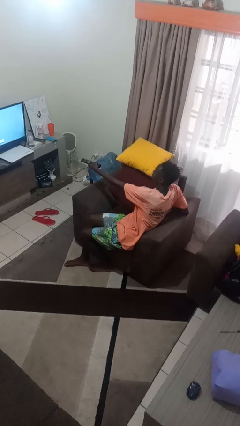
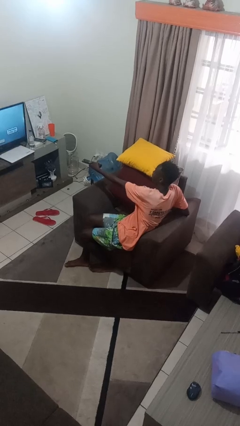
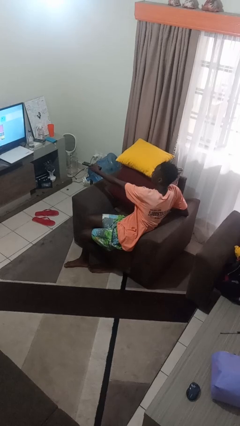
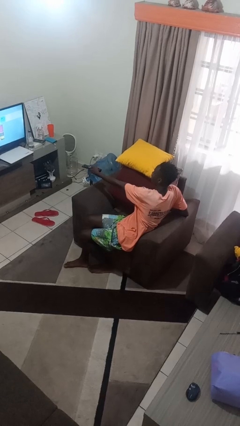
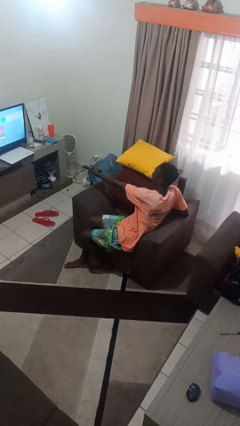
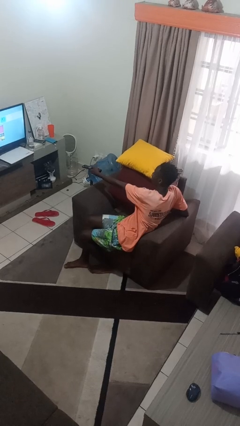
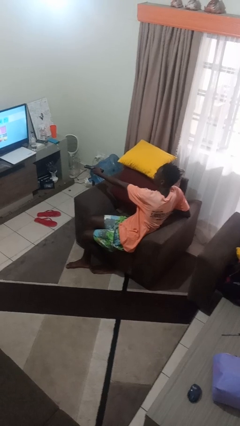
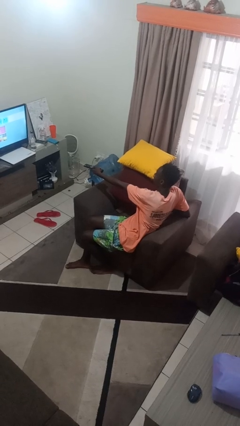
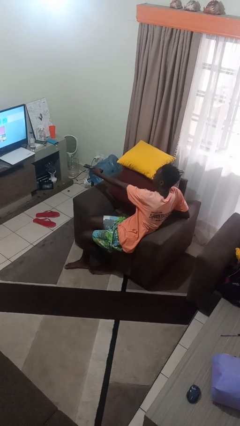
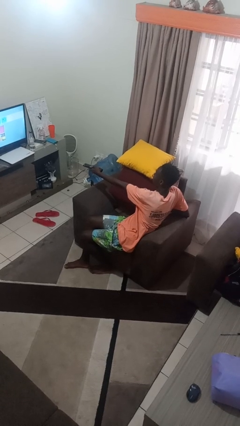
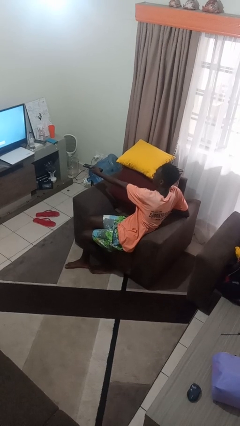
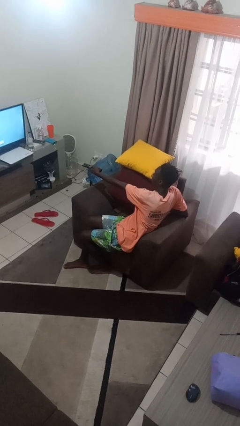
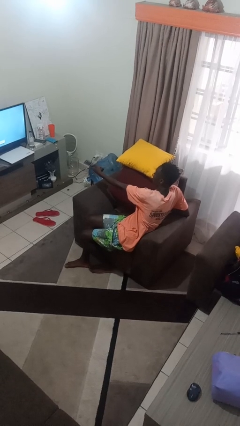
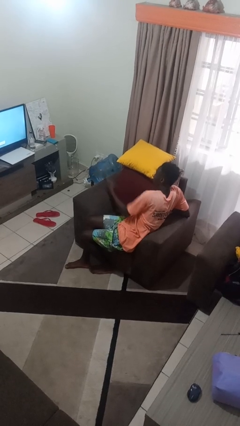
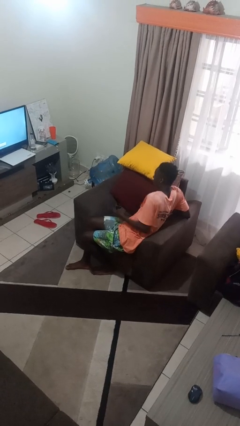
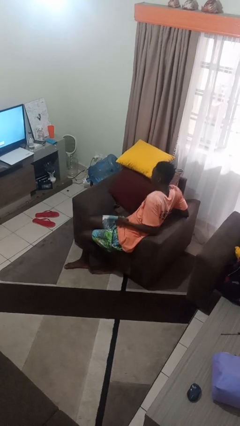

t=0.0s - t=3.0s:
person uses television remote

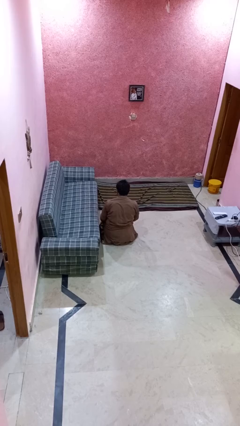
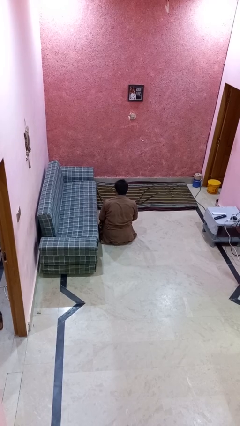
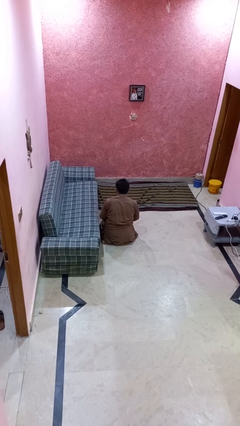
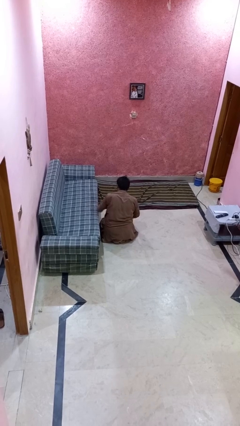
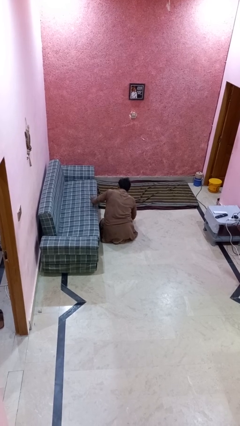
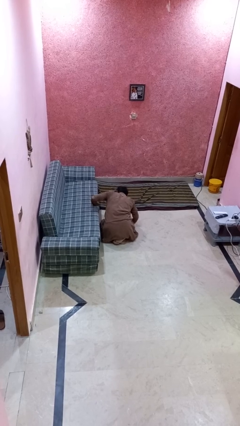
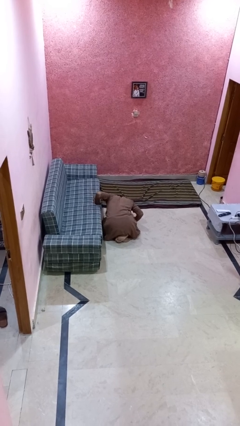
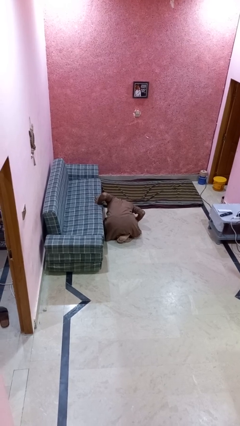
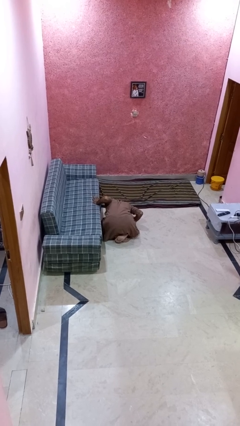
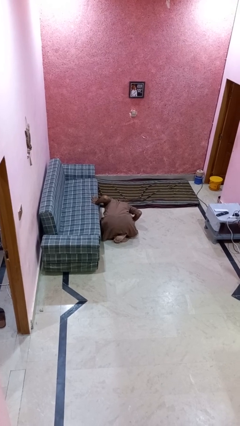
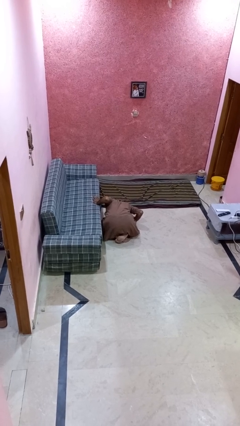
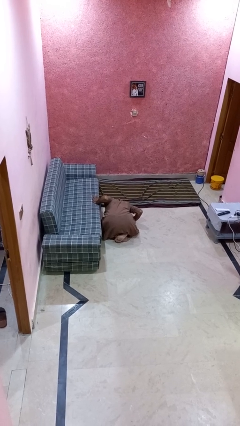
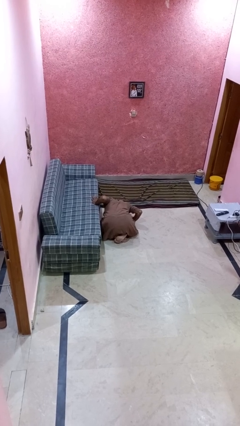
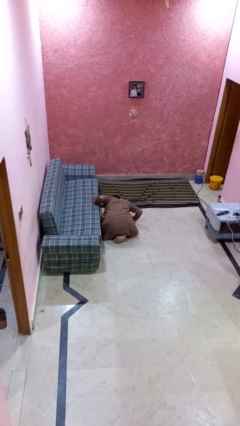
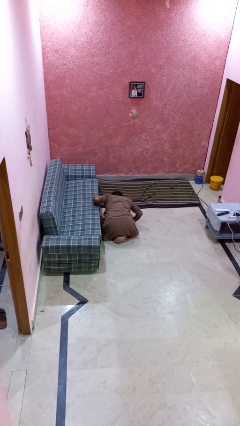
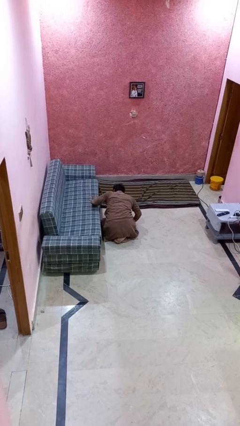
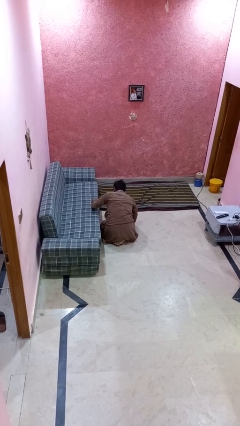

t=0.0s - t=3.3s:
person searches under couch

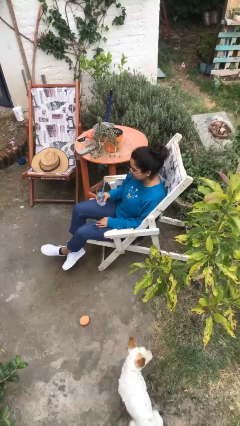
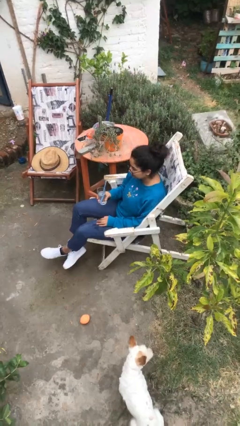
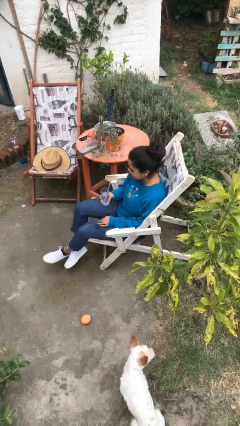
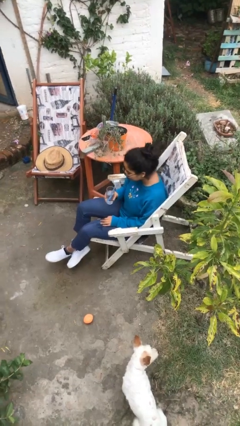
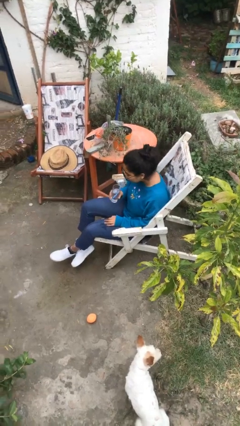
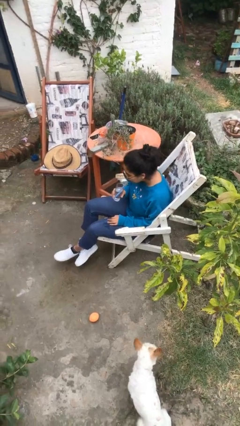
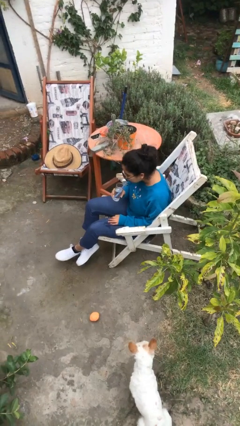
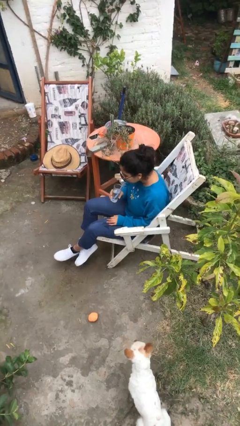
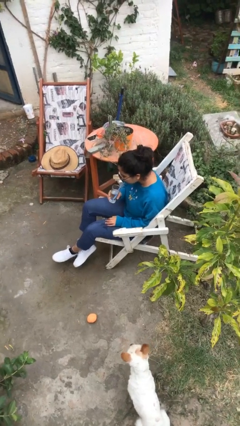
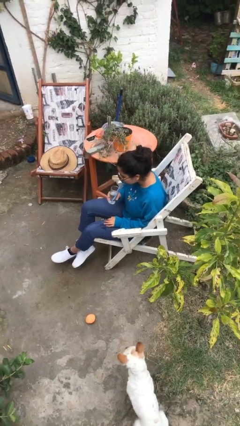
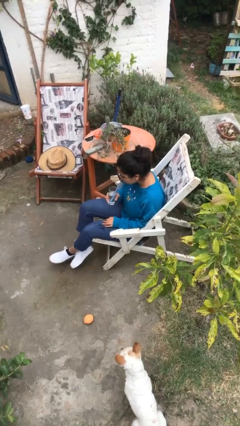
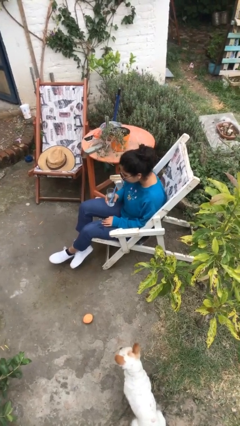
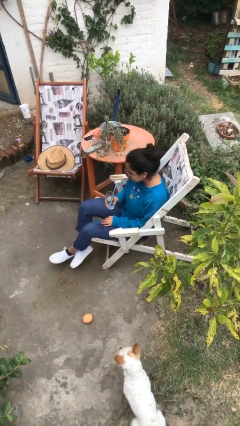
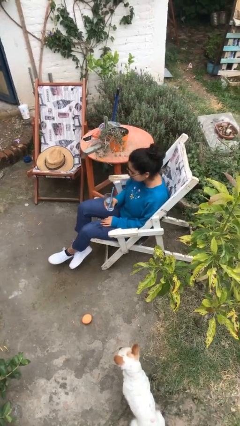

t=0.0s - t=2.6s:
person drinks from straw

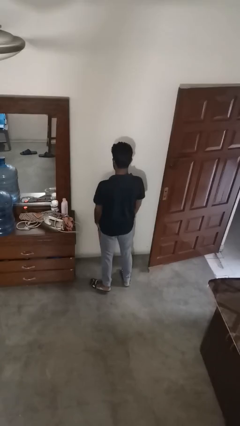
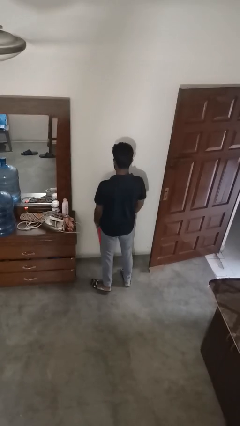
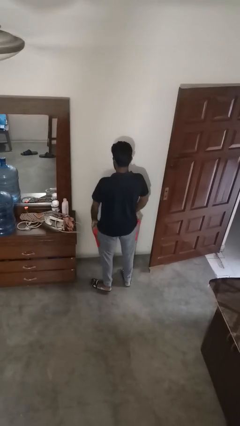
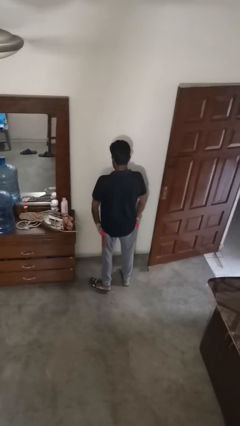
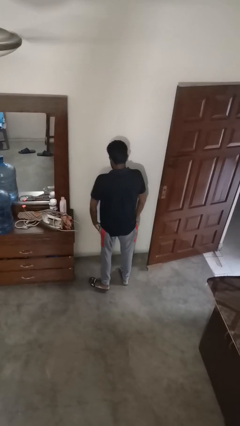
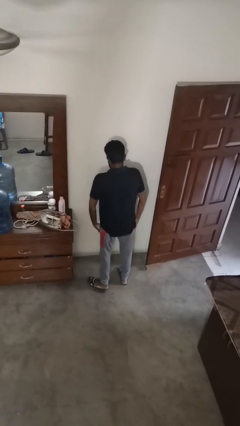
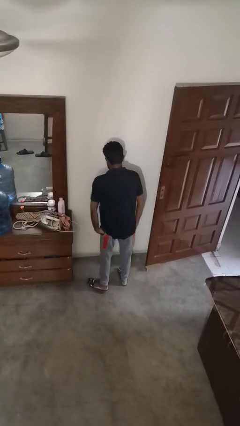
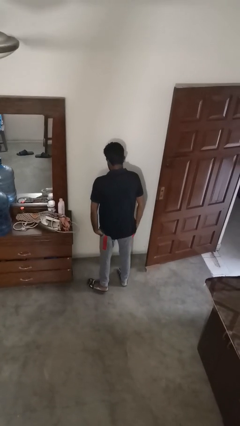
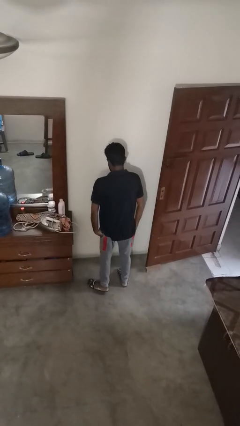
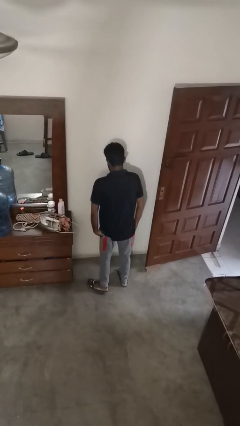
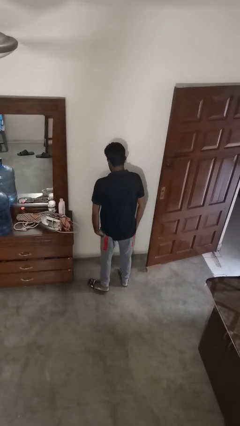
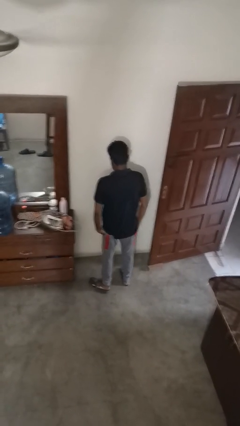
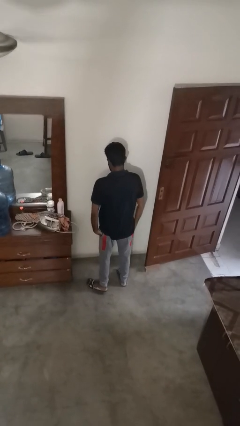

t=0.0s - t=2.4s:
person puts hands in back pockets

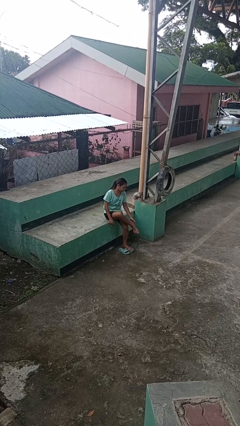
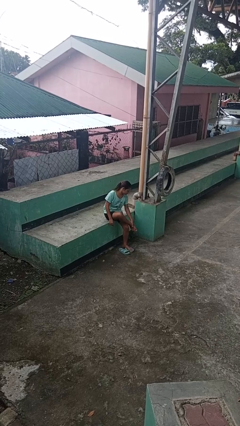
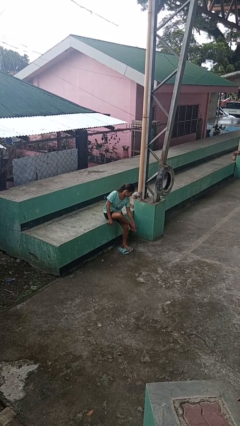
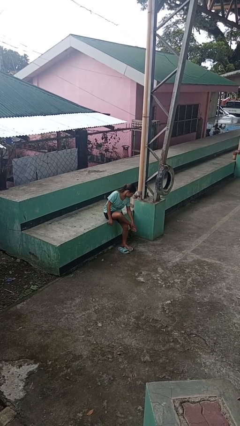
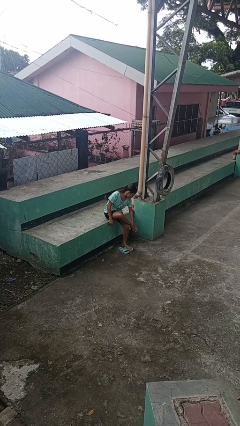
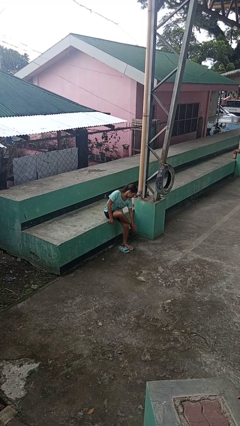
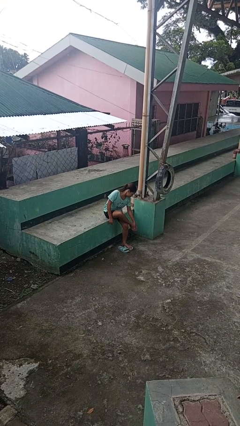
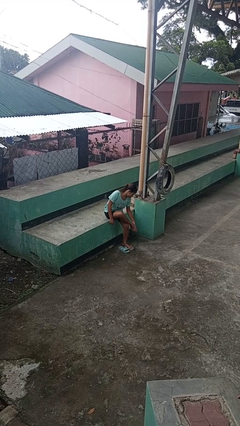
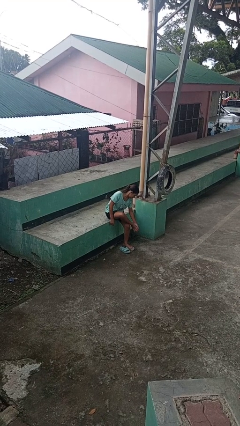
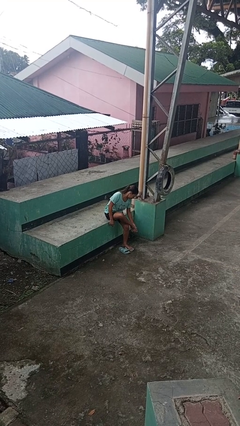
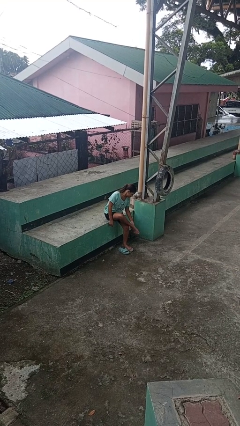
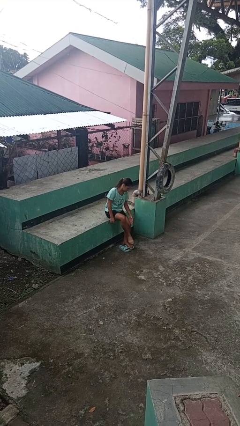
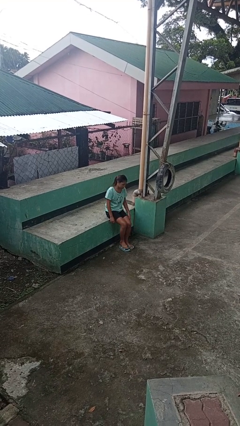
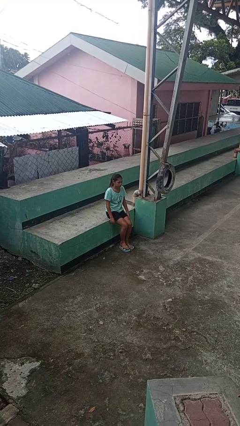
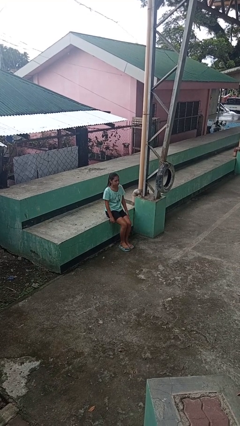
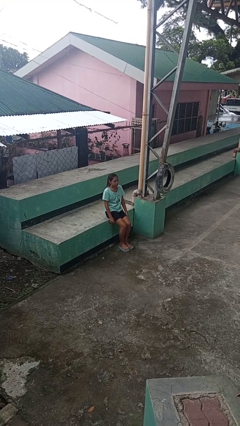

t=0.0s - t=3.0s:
person rubs foot

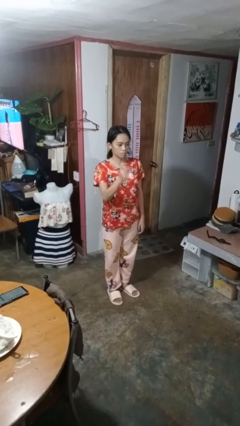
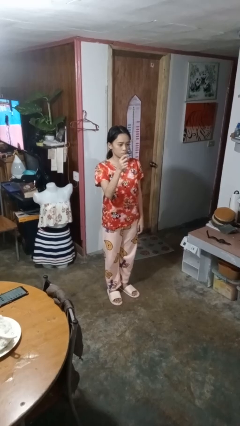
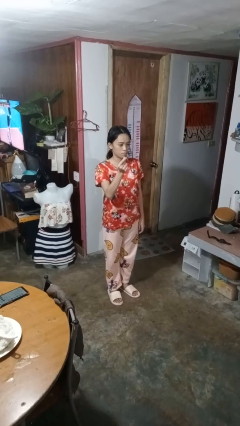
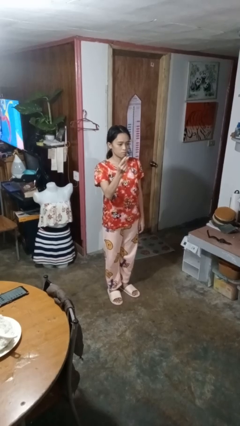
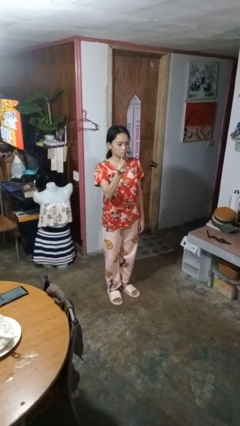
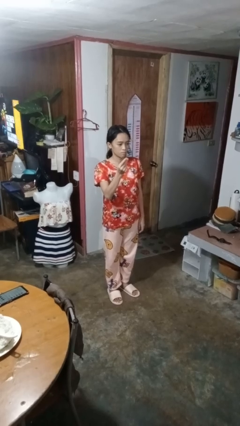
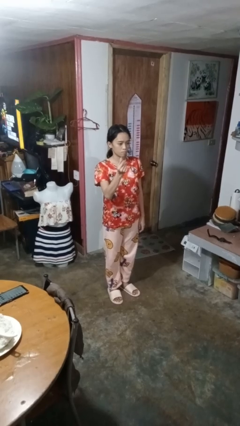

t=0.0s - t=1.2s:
person snaps fingers

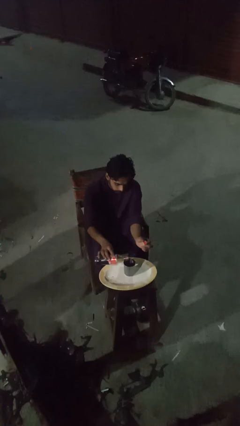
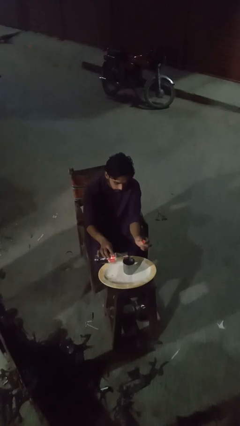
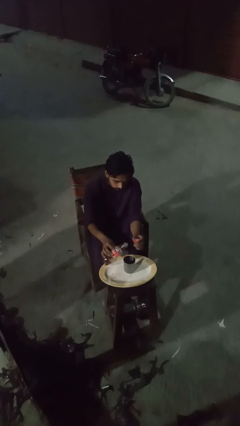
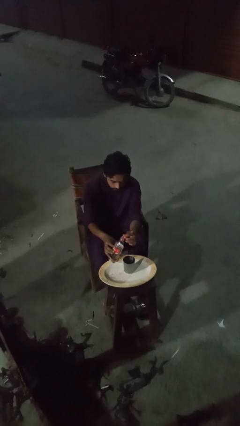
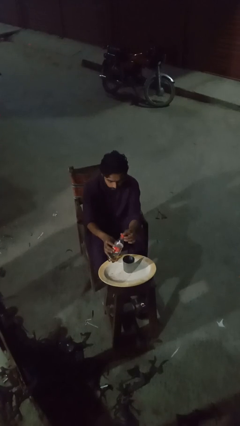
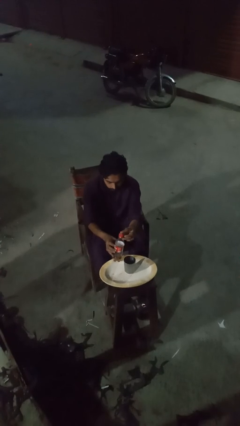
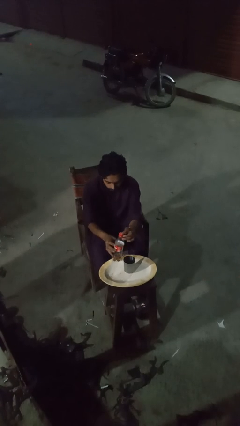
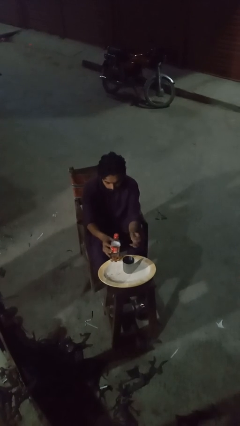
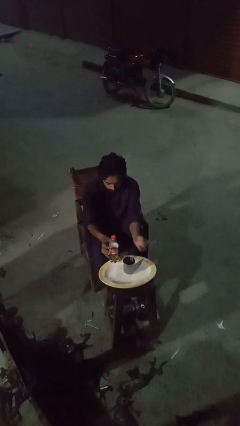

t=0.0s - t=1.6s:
person screws lid to bottle
